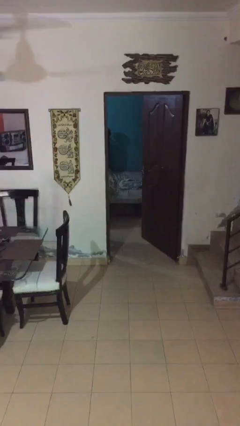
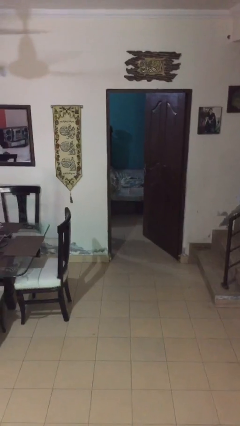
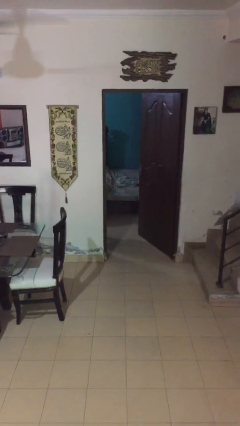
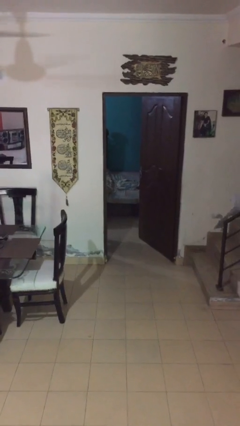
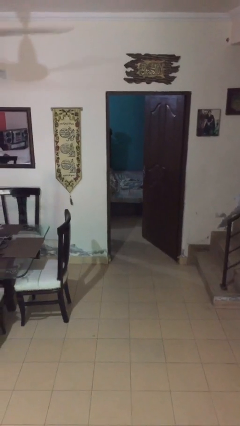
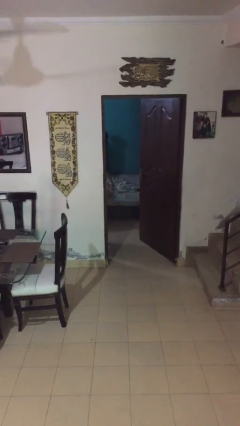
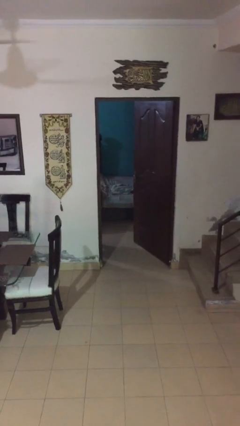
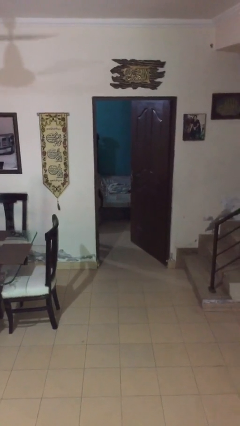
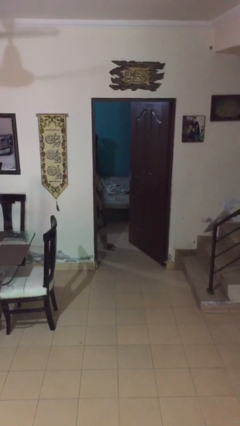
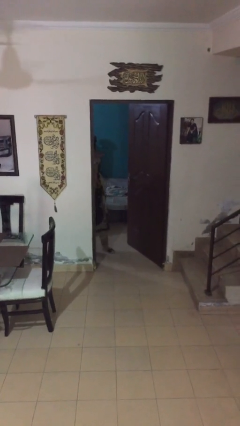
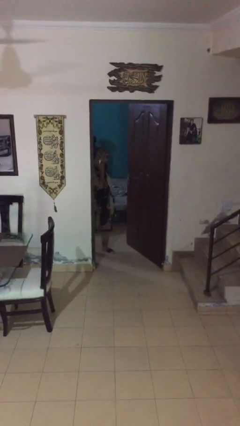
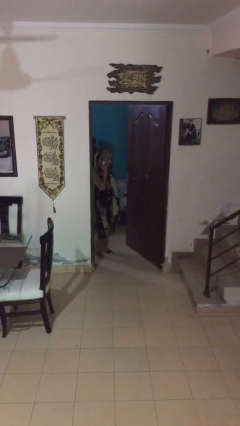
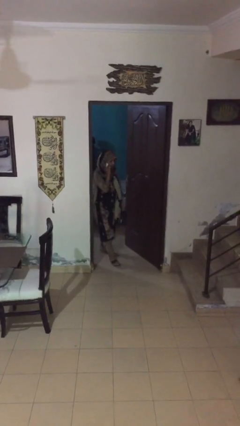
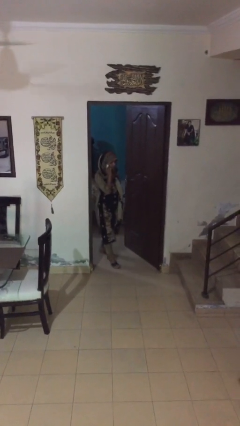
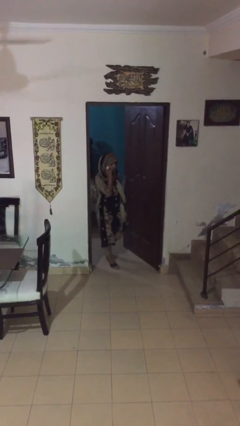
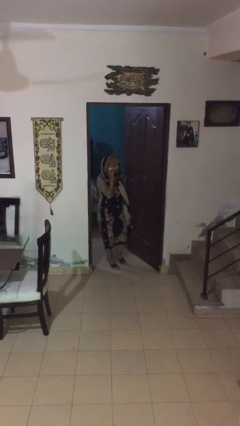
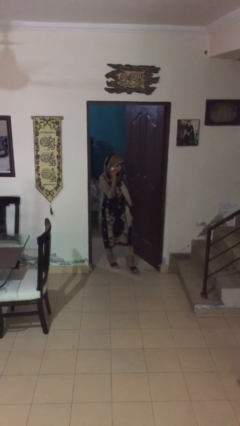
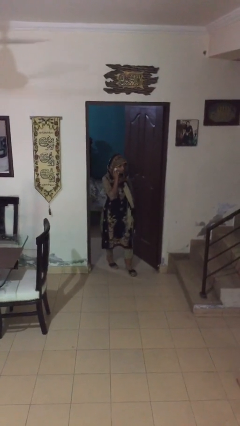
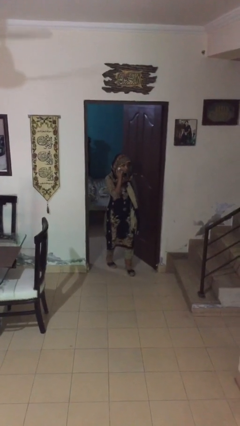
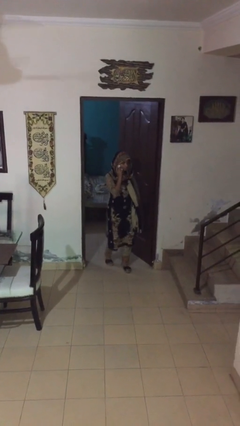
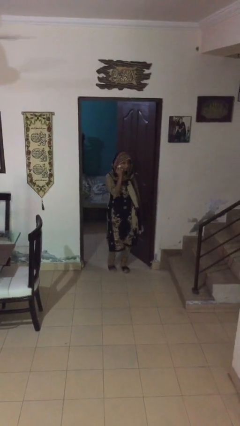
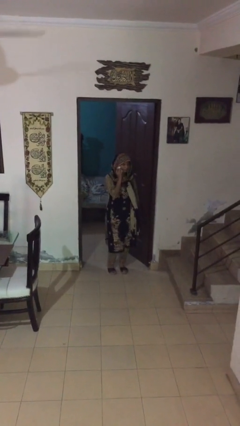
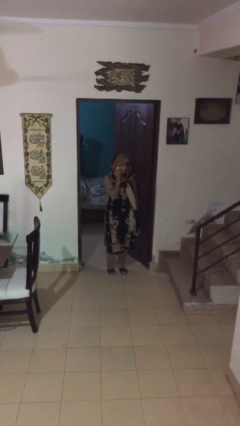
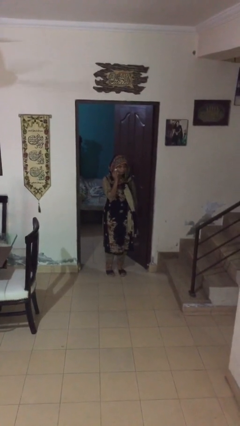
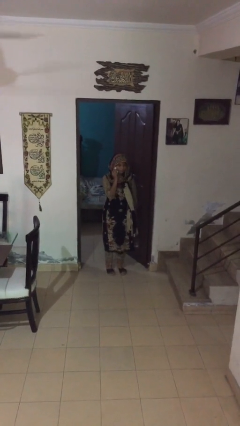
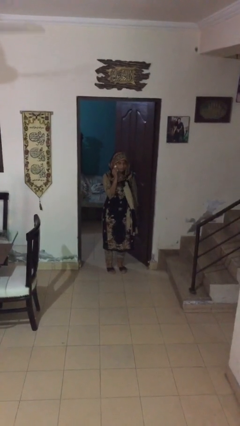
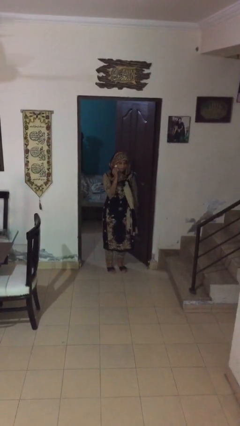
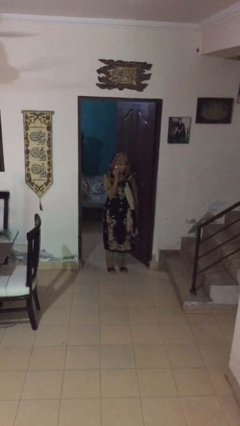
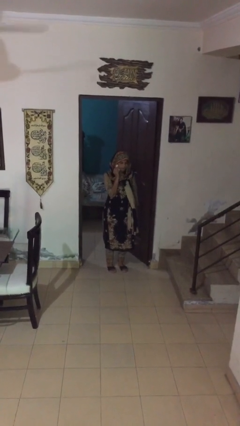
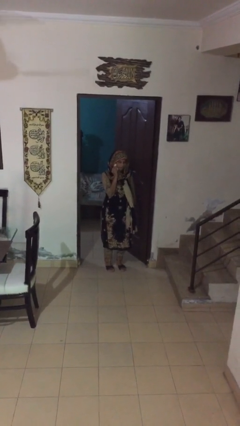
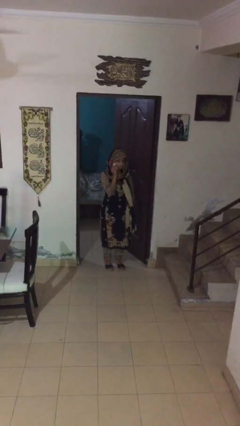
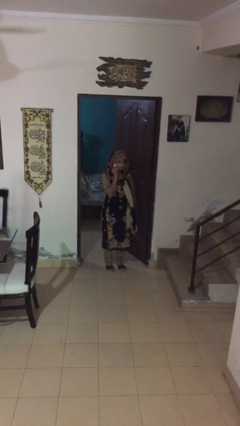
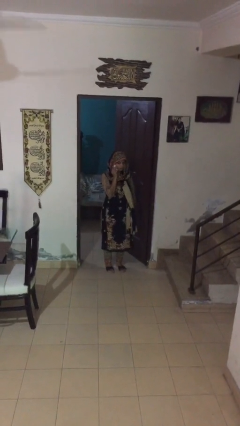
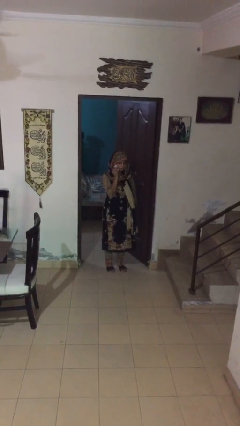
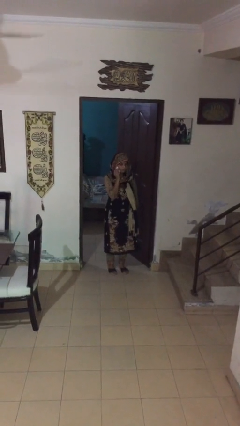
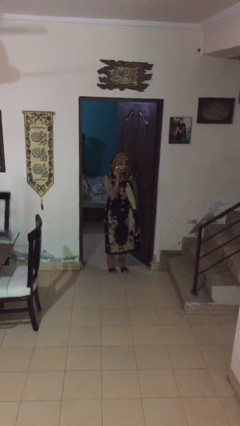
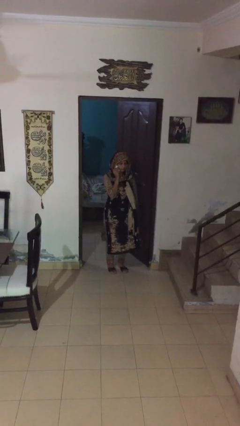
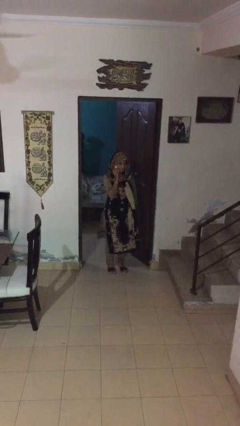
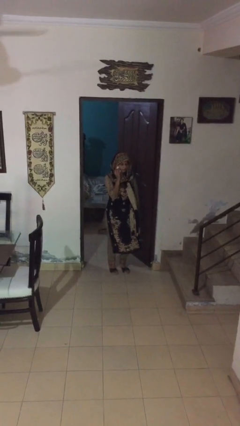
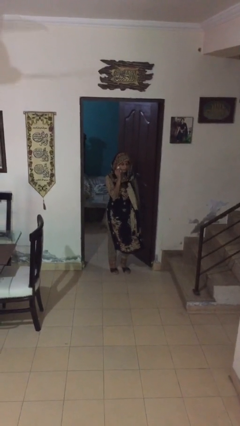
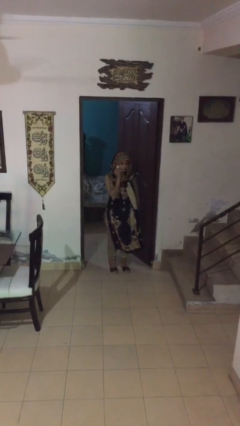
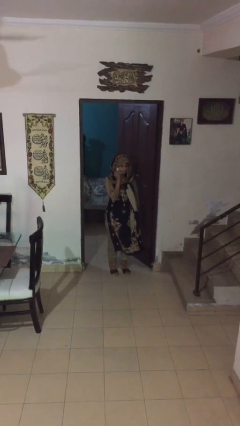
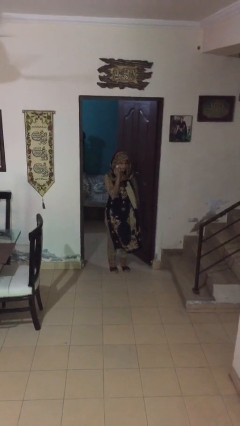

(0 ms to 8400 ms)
person enters scene through structure

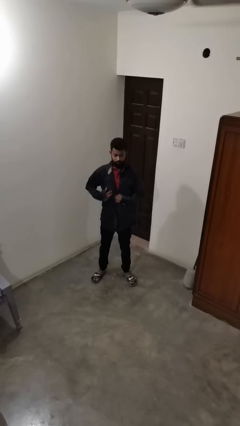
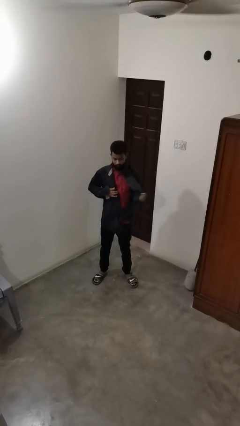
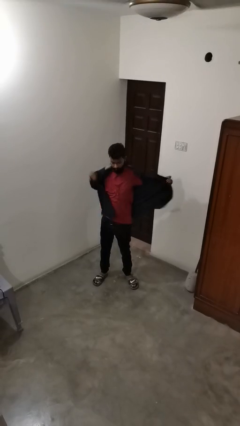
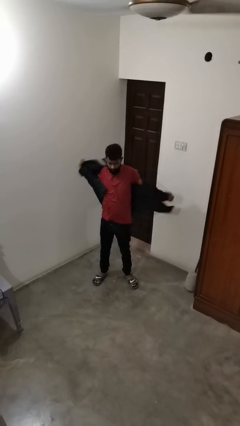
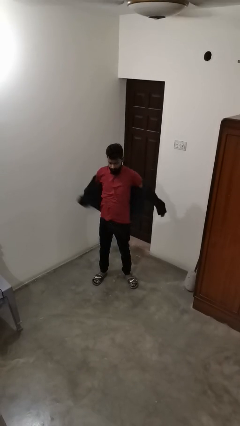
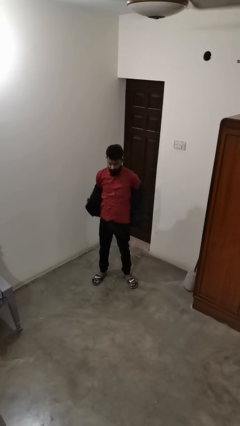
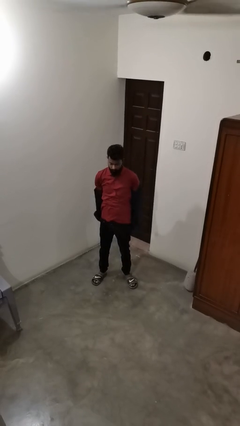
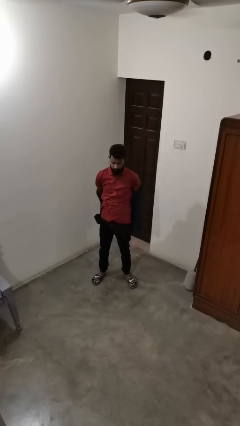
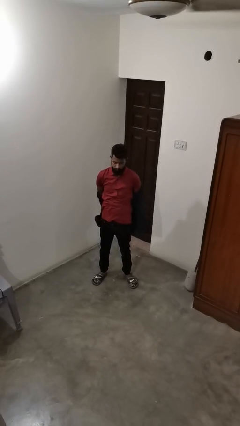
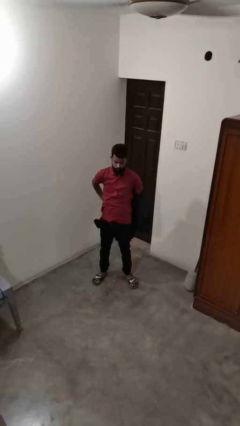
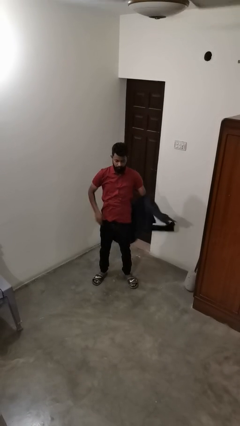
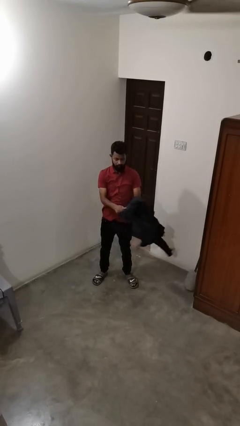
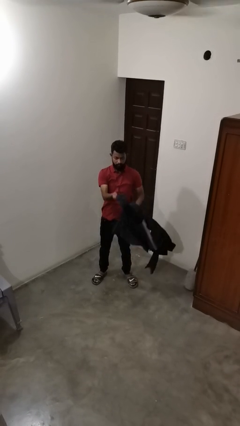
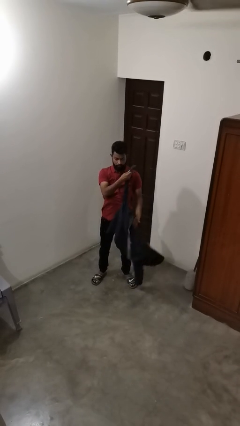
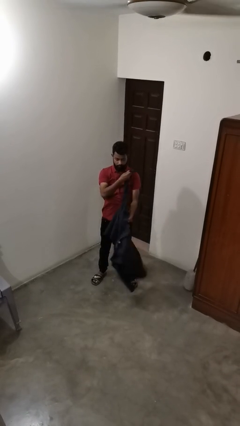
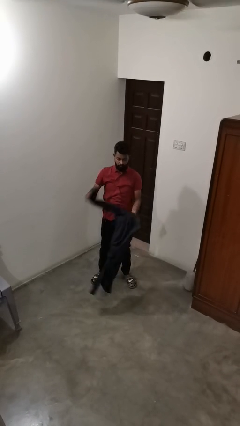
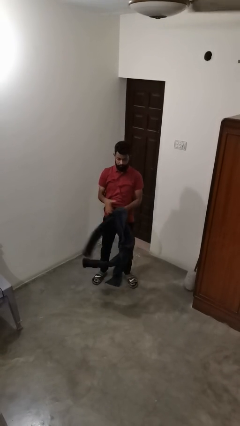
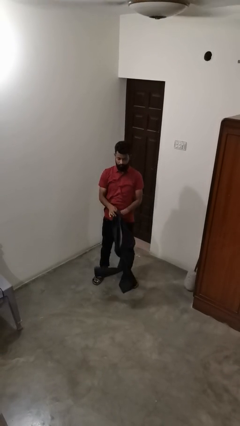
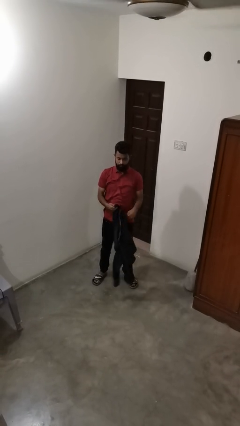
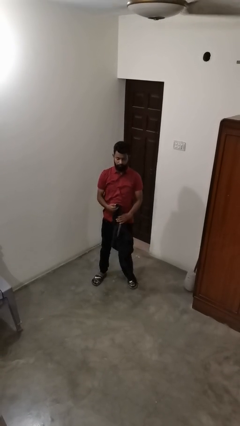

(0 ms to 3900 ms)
person takes off shirt

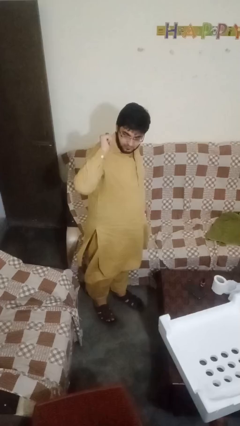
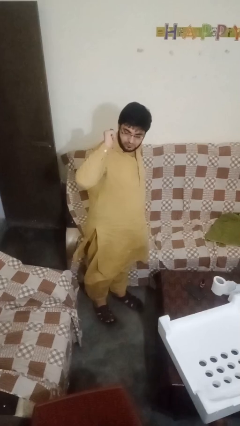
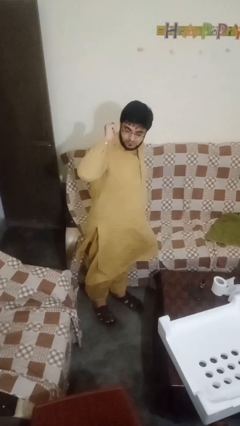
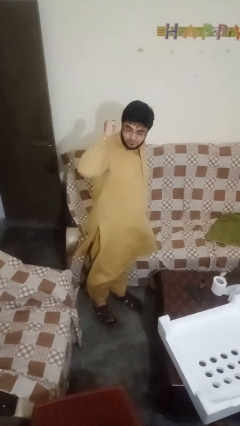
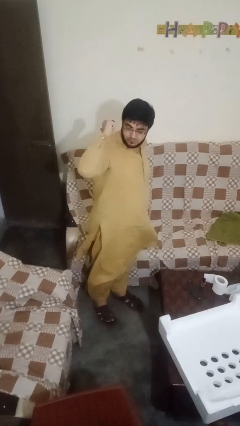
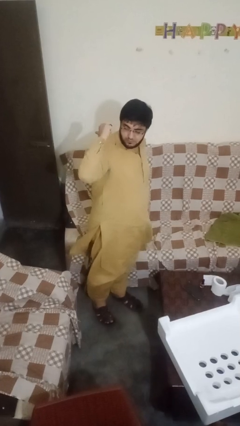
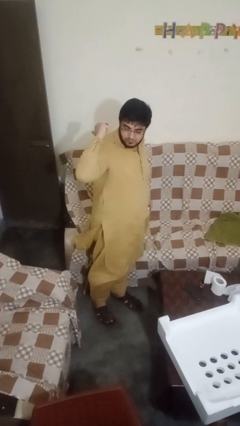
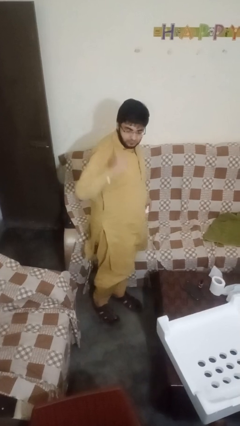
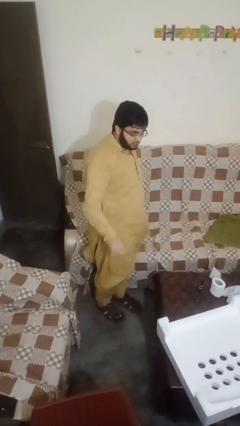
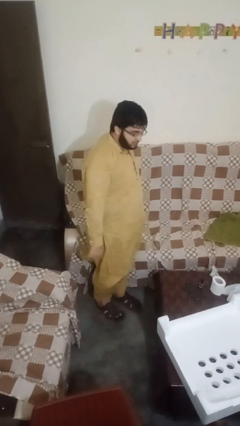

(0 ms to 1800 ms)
person gestures behind me

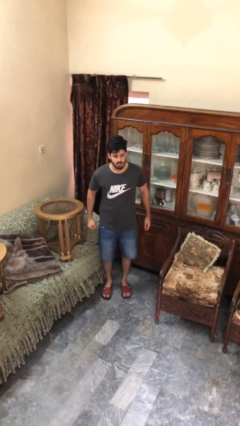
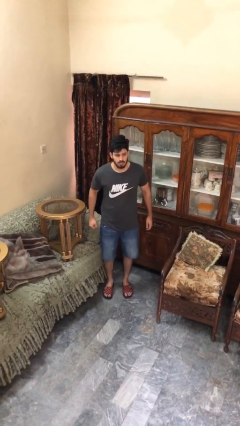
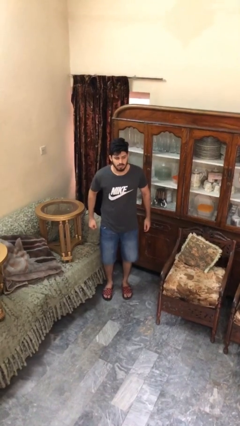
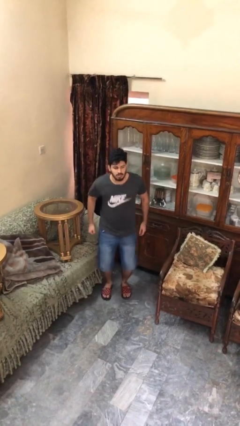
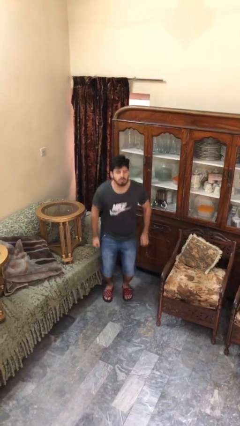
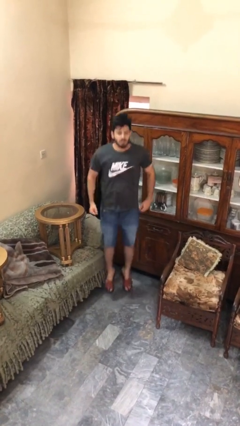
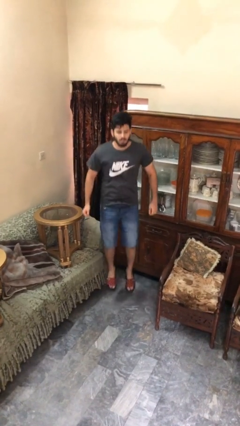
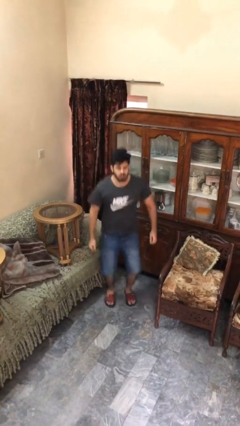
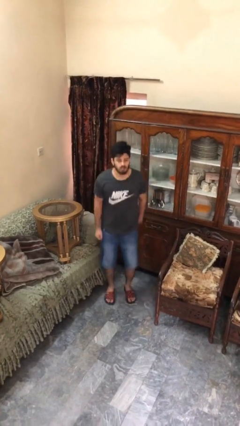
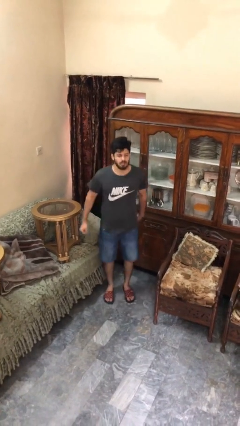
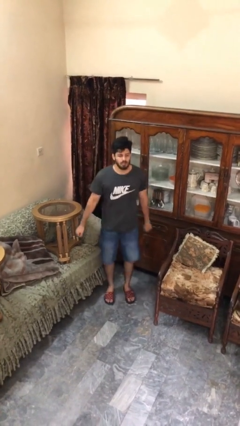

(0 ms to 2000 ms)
person jumps

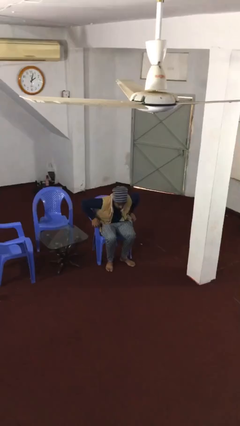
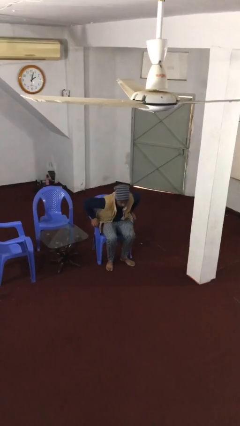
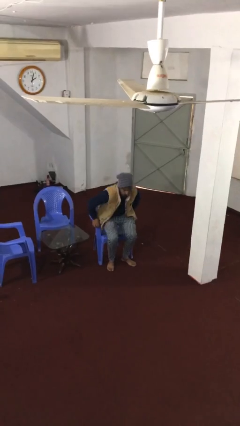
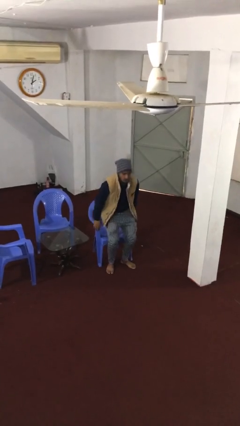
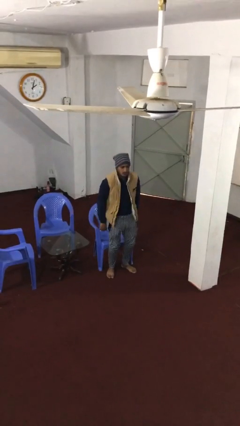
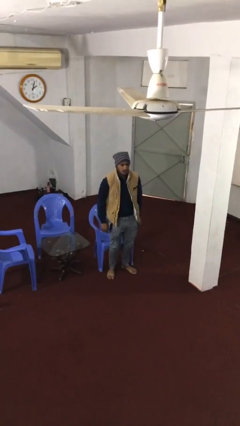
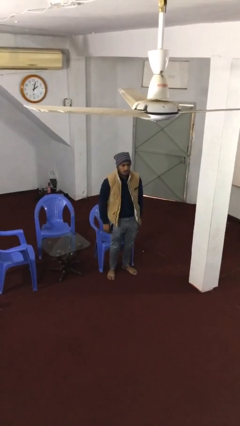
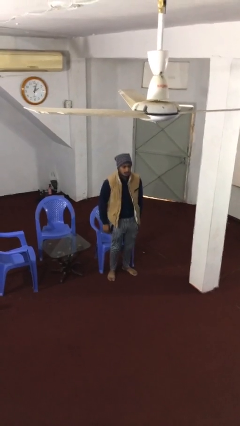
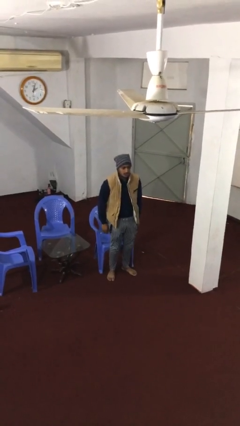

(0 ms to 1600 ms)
person stands up
